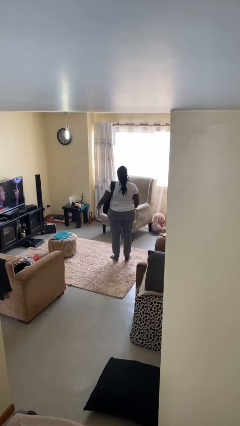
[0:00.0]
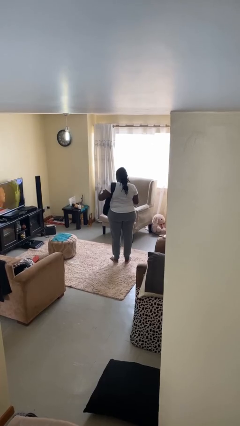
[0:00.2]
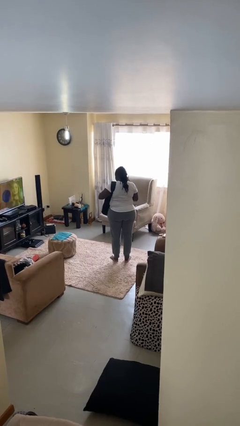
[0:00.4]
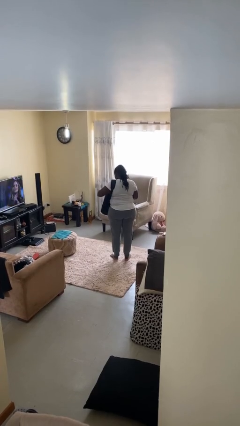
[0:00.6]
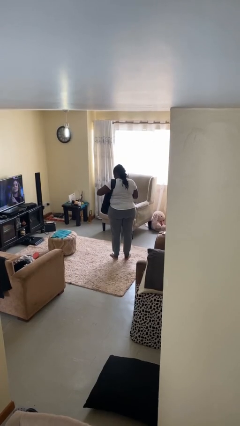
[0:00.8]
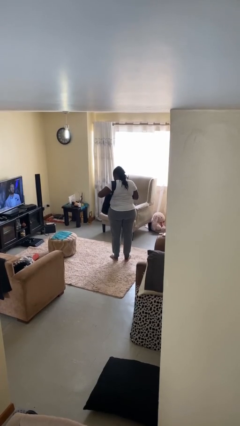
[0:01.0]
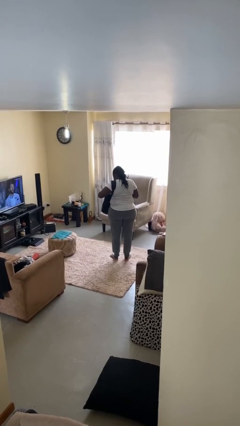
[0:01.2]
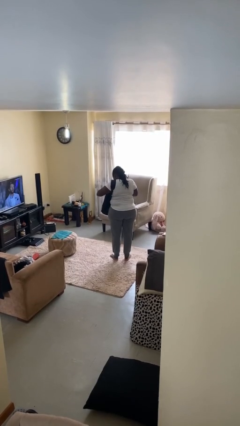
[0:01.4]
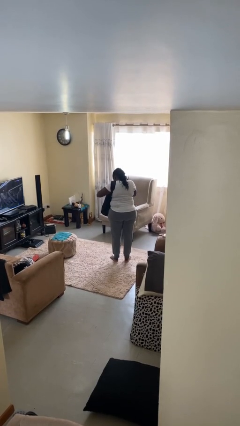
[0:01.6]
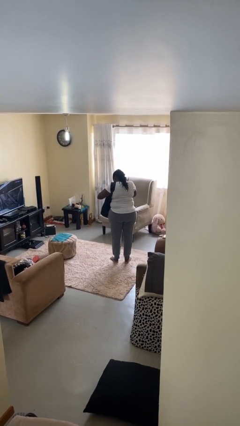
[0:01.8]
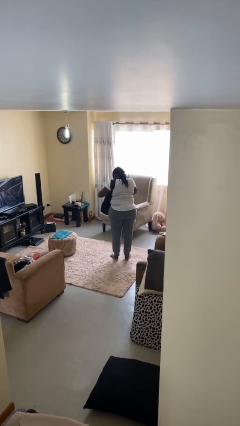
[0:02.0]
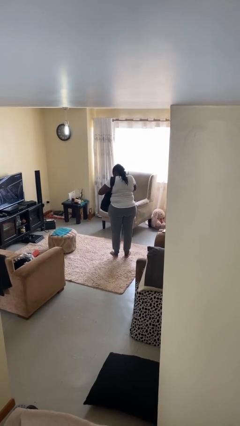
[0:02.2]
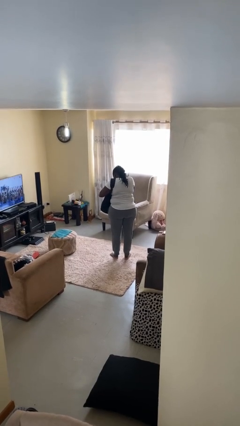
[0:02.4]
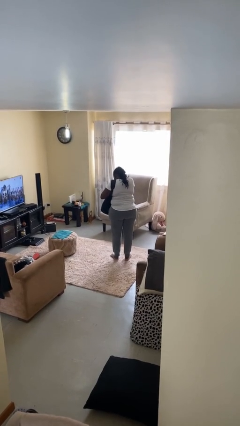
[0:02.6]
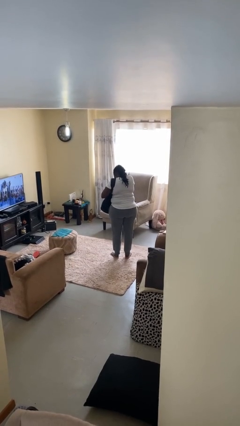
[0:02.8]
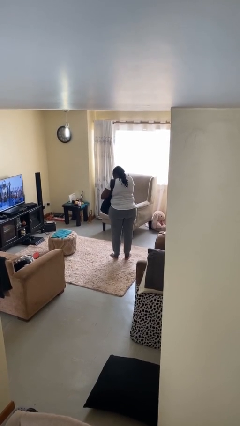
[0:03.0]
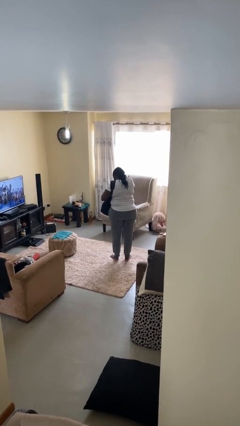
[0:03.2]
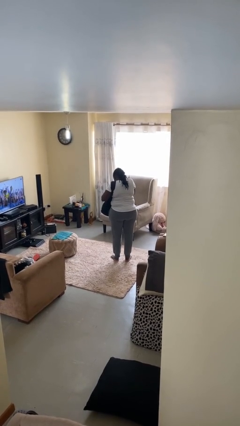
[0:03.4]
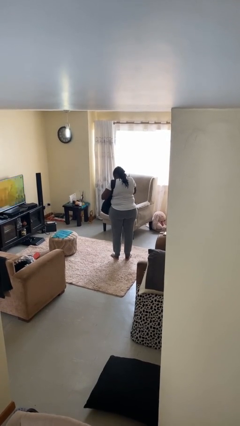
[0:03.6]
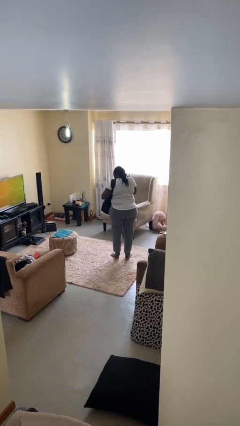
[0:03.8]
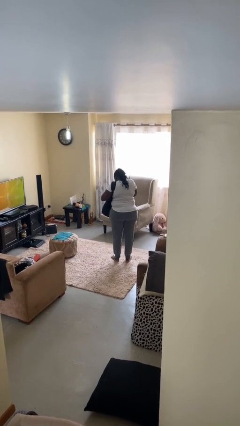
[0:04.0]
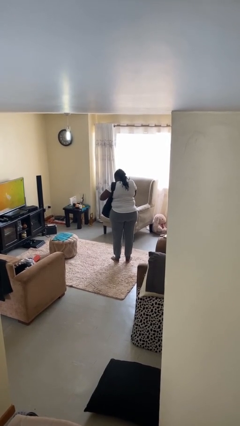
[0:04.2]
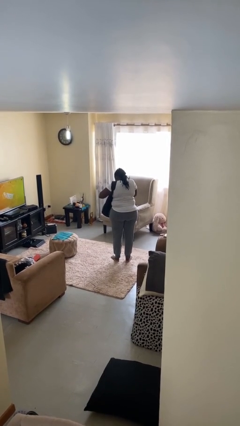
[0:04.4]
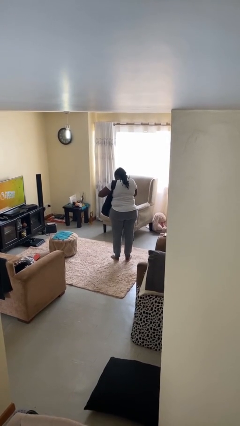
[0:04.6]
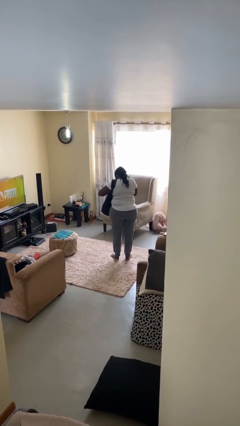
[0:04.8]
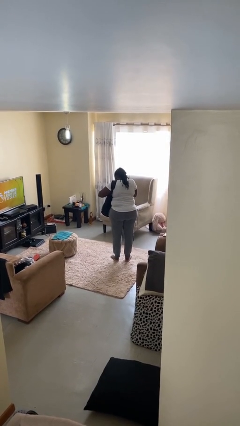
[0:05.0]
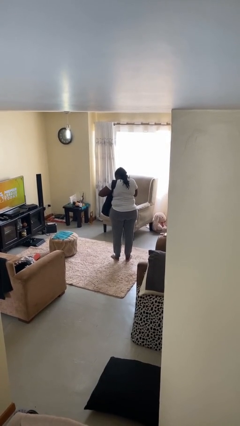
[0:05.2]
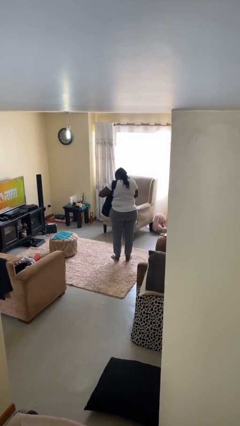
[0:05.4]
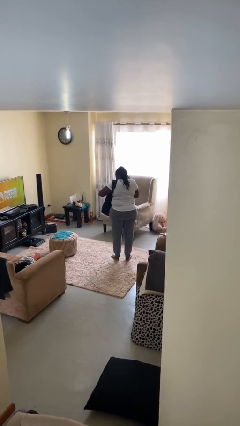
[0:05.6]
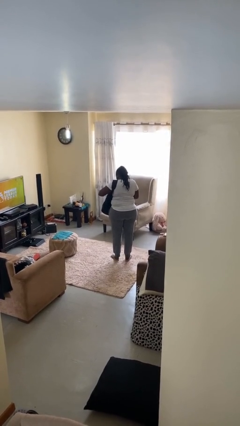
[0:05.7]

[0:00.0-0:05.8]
person searches in backpack

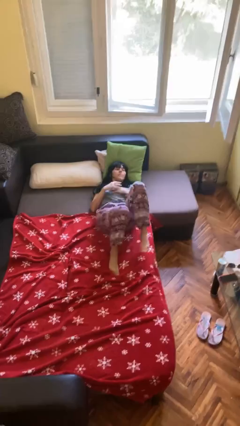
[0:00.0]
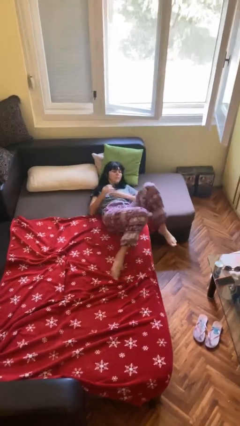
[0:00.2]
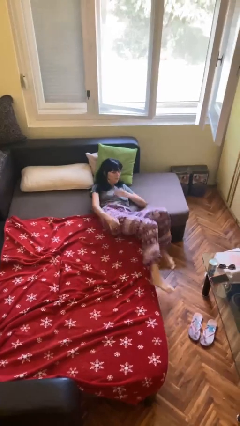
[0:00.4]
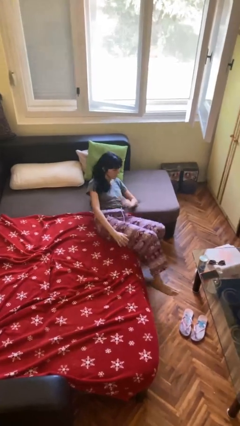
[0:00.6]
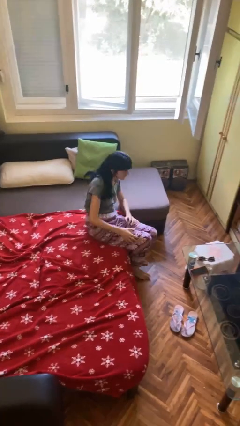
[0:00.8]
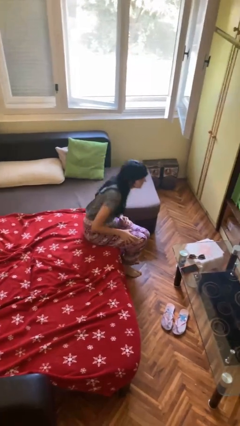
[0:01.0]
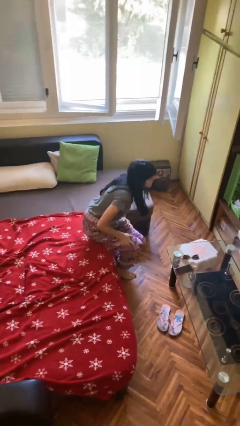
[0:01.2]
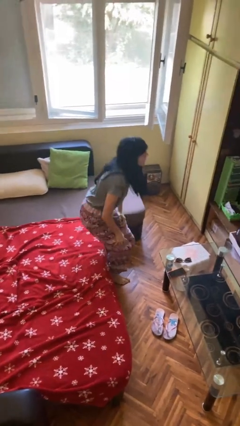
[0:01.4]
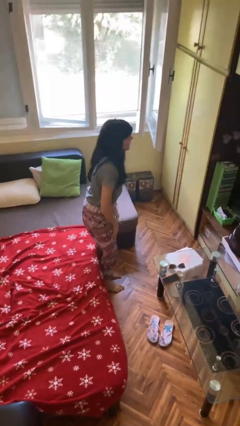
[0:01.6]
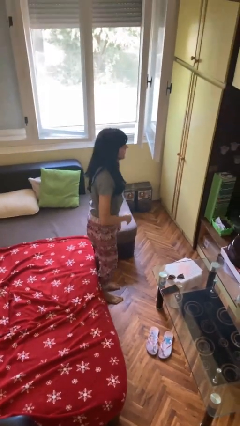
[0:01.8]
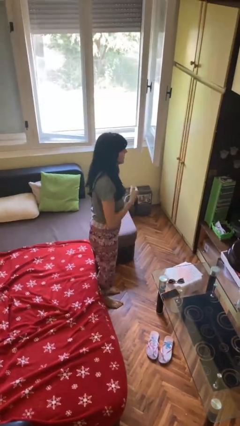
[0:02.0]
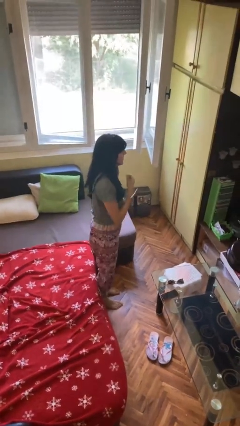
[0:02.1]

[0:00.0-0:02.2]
person stands up

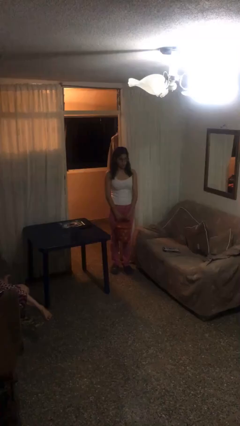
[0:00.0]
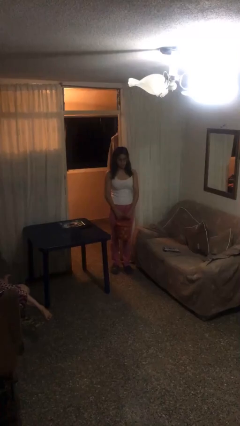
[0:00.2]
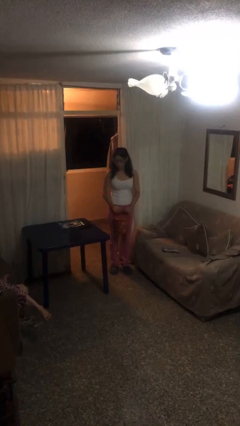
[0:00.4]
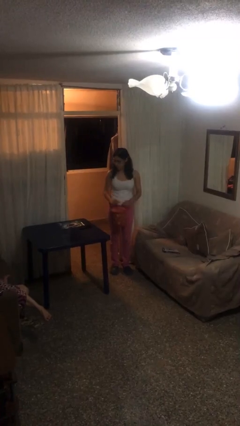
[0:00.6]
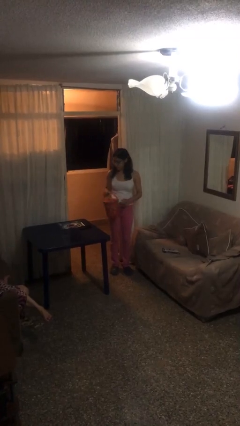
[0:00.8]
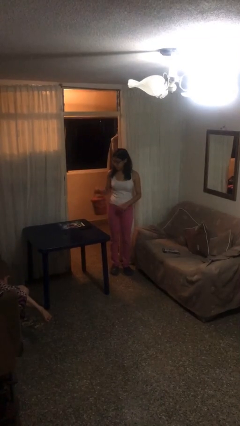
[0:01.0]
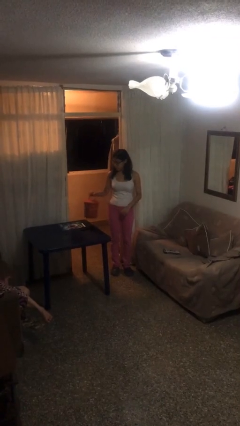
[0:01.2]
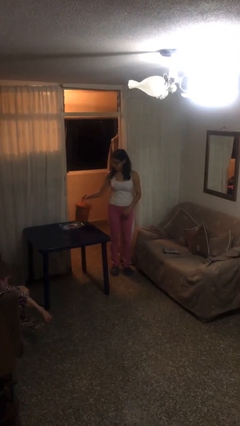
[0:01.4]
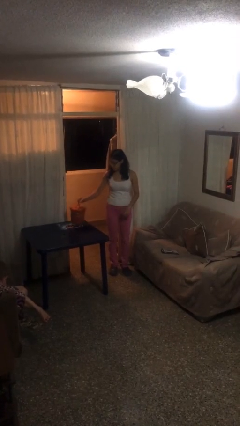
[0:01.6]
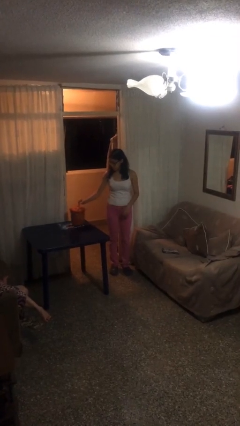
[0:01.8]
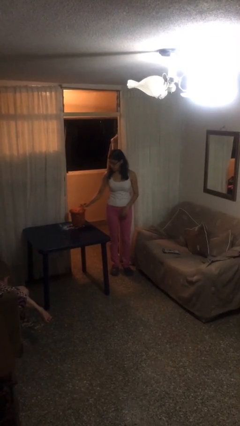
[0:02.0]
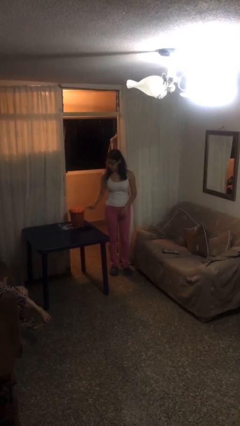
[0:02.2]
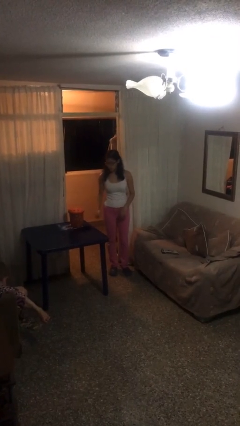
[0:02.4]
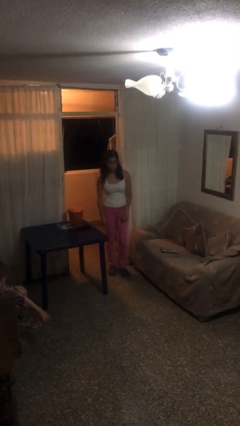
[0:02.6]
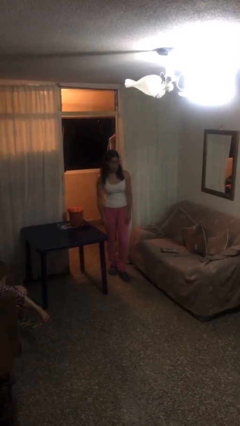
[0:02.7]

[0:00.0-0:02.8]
person puts down object on table

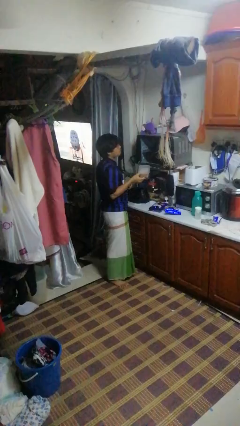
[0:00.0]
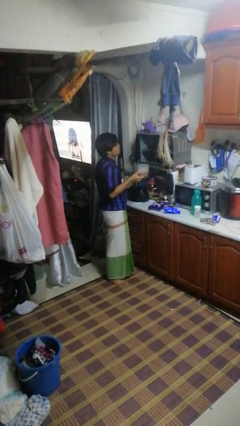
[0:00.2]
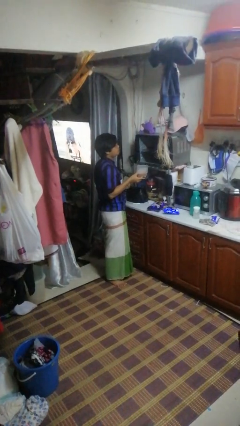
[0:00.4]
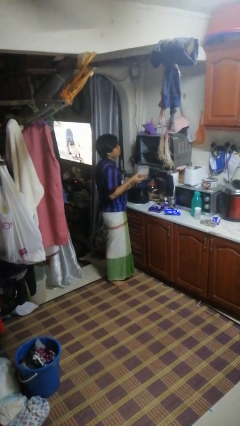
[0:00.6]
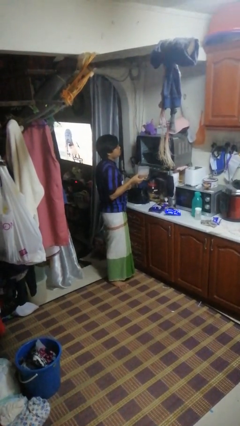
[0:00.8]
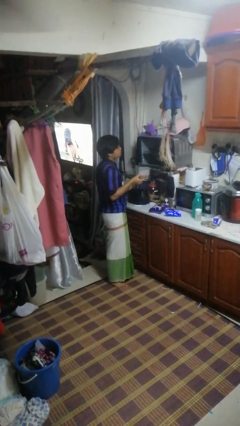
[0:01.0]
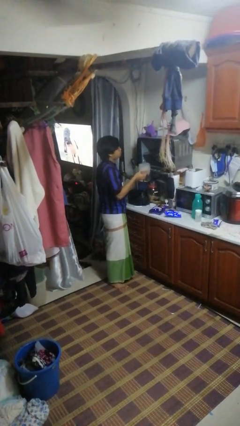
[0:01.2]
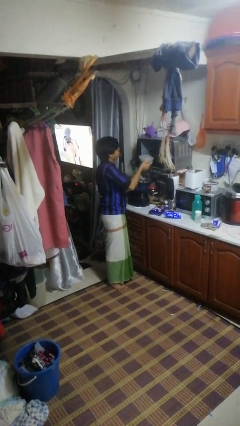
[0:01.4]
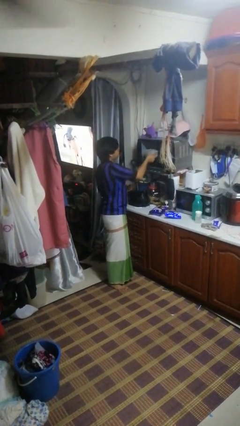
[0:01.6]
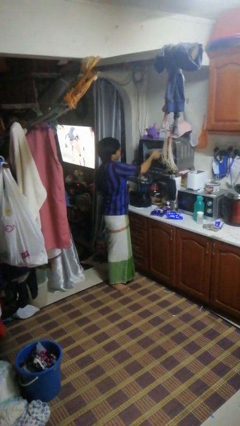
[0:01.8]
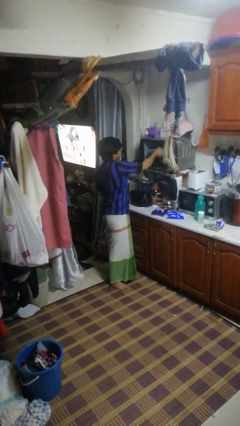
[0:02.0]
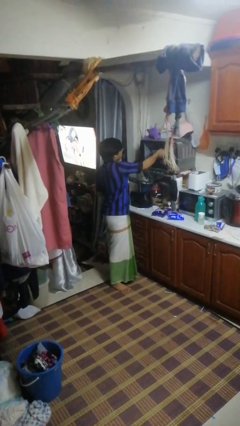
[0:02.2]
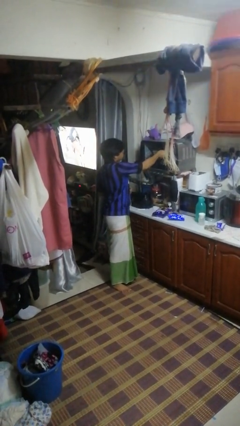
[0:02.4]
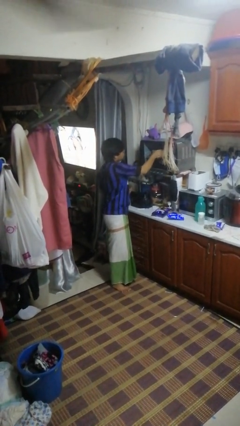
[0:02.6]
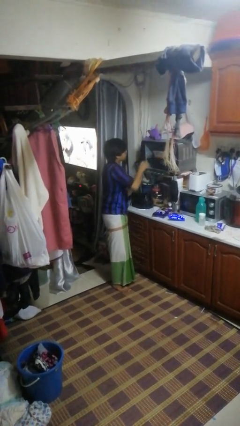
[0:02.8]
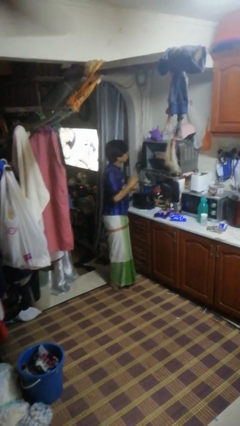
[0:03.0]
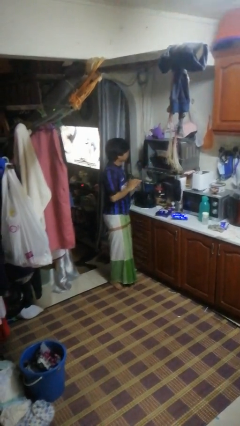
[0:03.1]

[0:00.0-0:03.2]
person puts object into oven

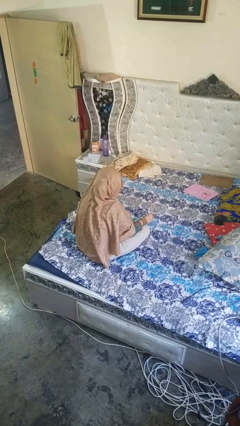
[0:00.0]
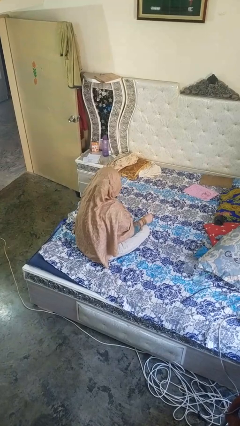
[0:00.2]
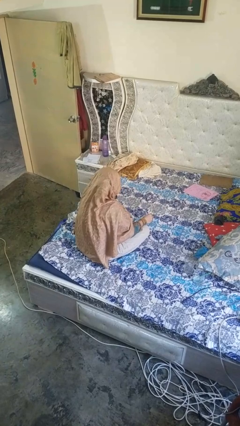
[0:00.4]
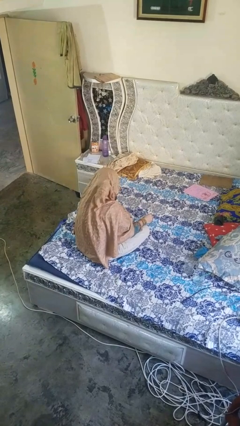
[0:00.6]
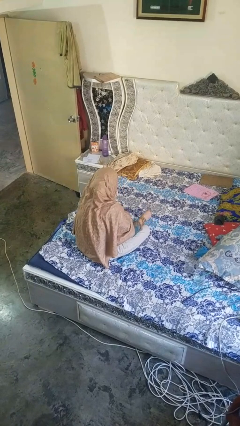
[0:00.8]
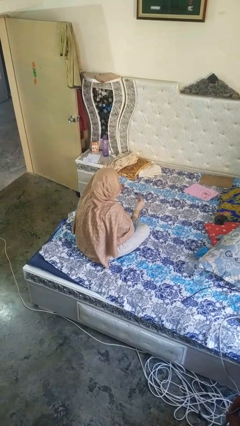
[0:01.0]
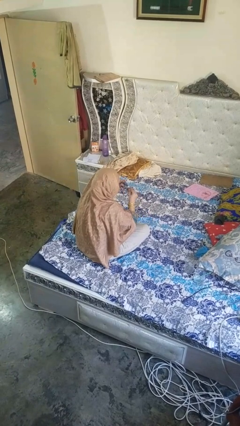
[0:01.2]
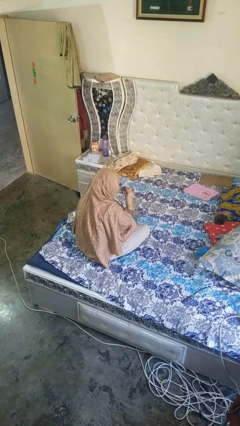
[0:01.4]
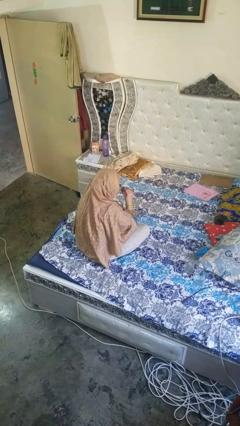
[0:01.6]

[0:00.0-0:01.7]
person puts on glasses

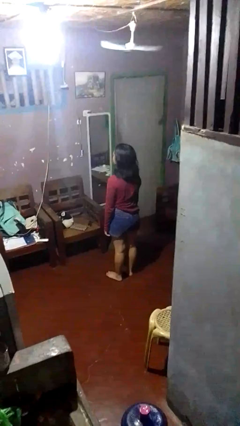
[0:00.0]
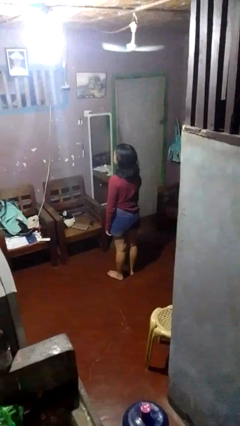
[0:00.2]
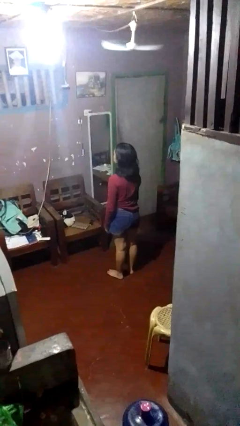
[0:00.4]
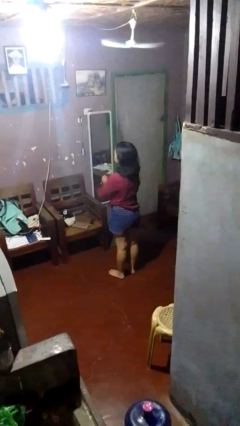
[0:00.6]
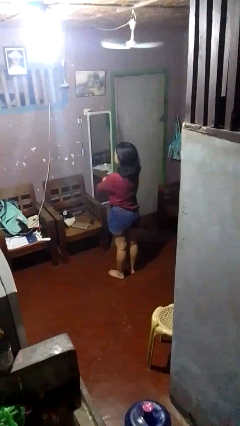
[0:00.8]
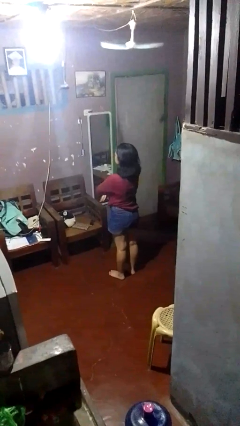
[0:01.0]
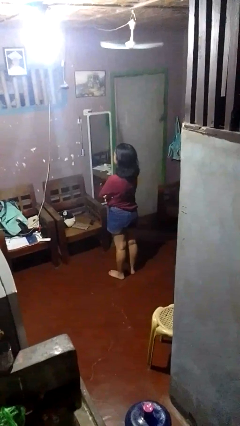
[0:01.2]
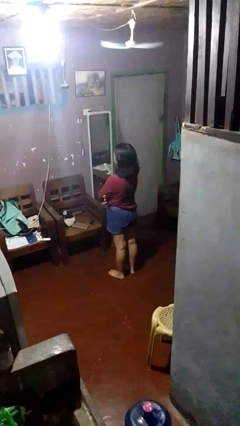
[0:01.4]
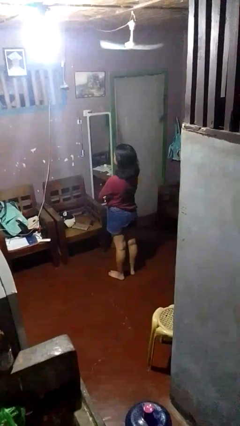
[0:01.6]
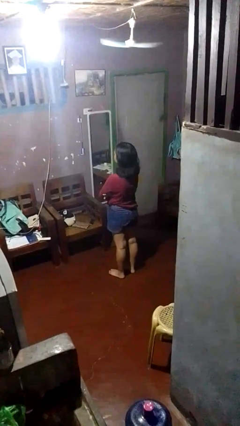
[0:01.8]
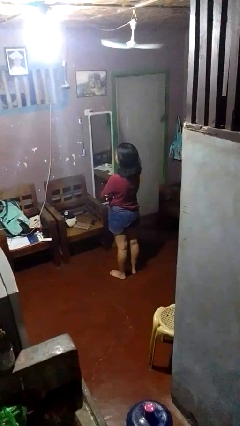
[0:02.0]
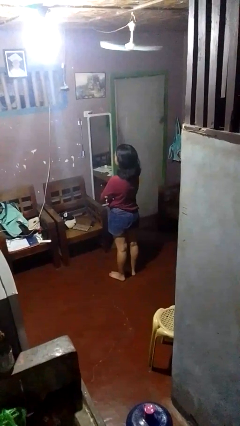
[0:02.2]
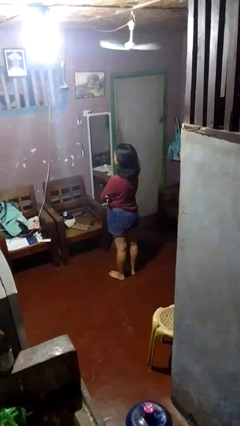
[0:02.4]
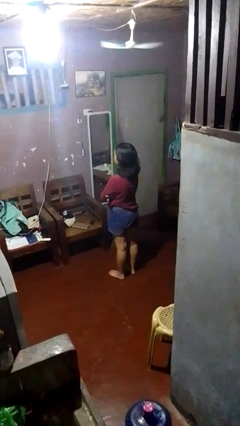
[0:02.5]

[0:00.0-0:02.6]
person crosses arms
